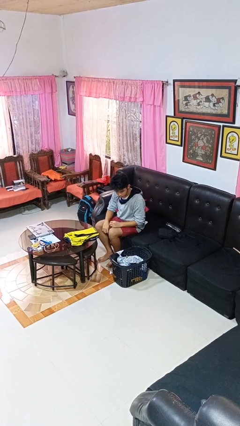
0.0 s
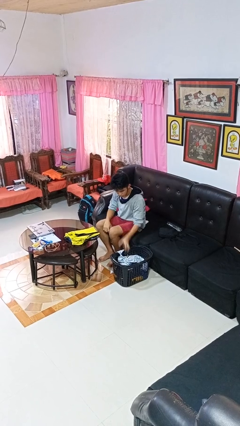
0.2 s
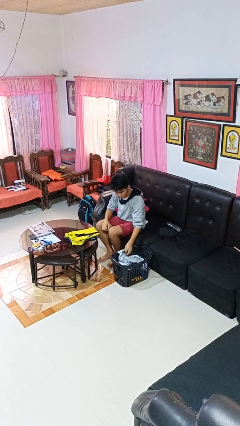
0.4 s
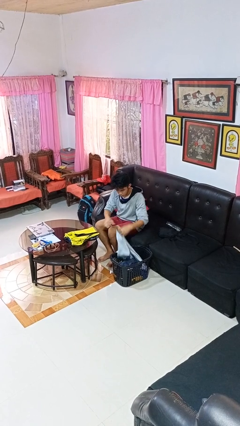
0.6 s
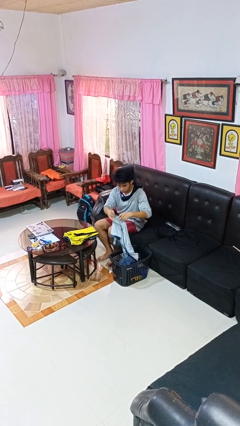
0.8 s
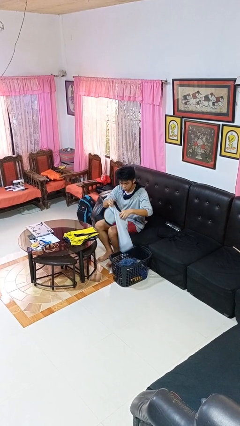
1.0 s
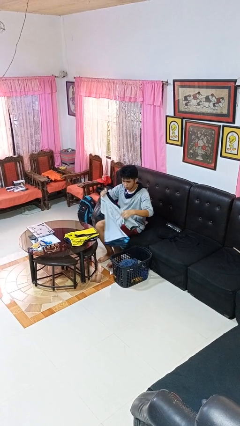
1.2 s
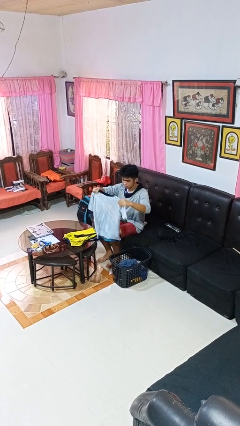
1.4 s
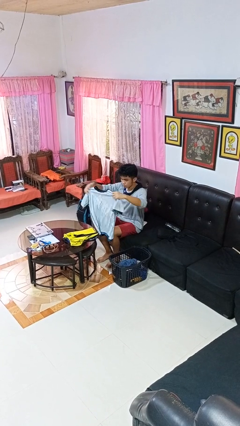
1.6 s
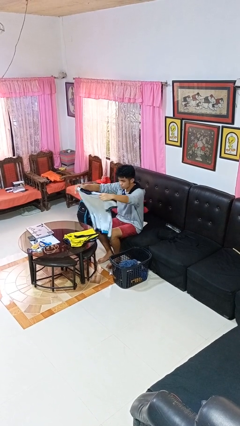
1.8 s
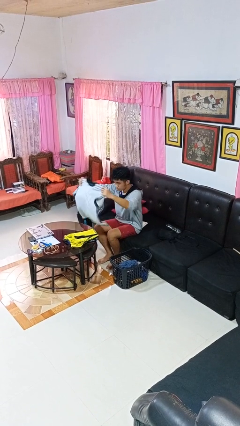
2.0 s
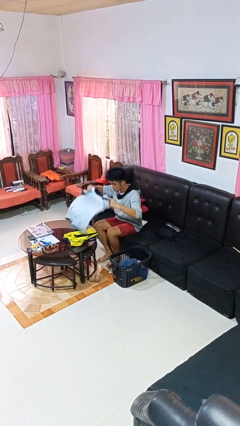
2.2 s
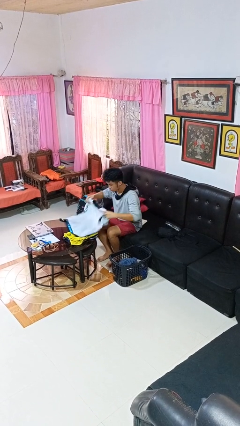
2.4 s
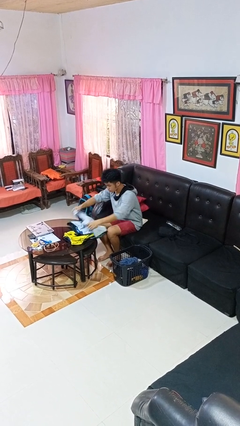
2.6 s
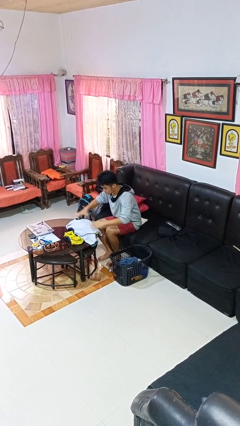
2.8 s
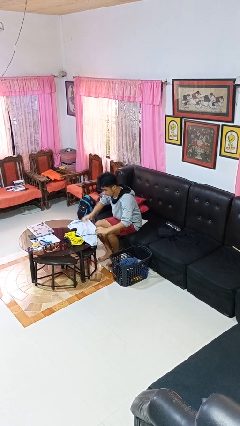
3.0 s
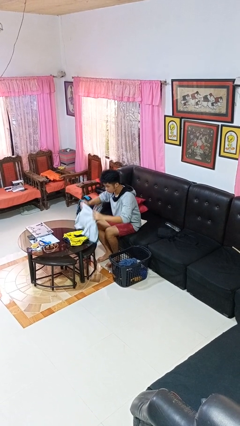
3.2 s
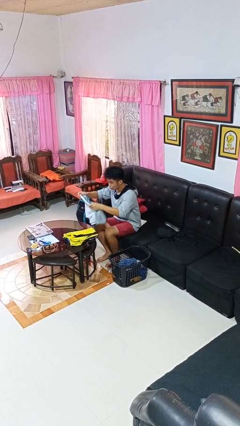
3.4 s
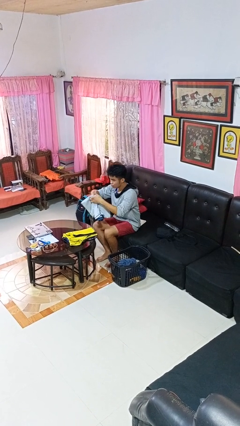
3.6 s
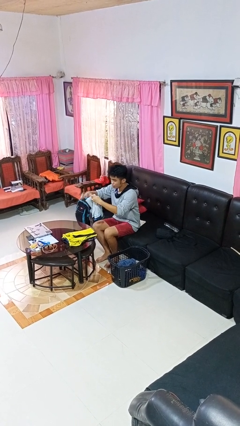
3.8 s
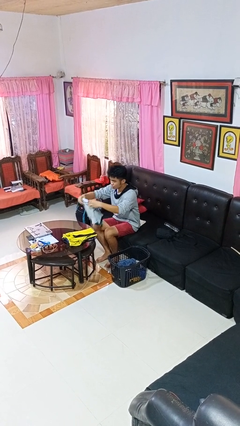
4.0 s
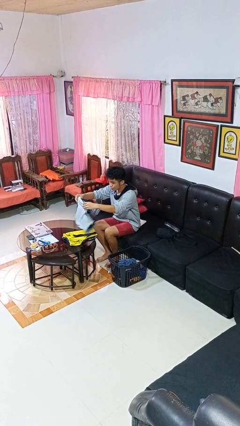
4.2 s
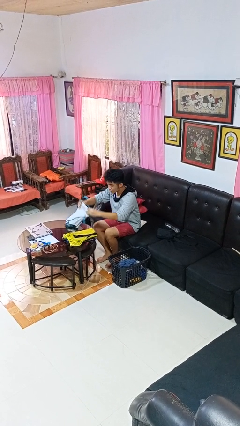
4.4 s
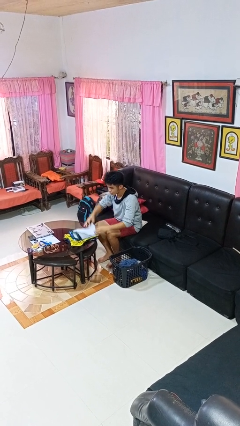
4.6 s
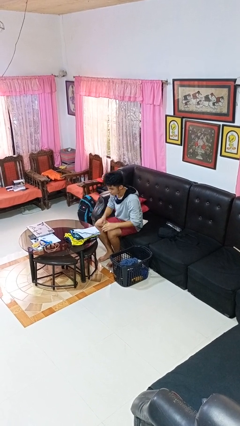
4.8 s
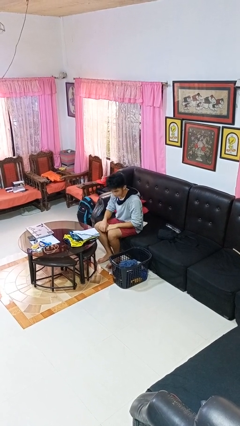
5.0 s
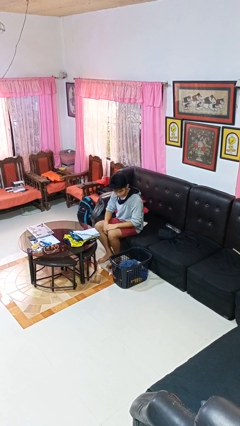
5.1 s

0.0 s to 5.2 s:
person folds shirt

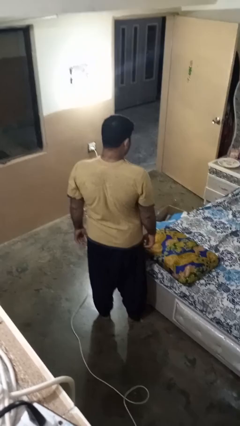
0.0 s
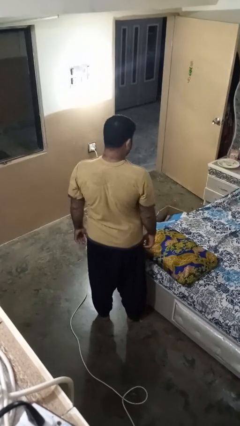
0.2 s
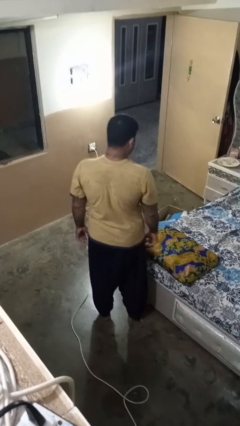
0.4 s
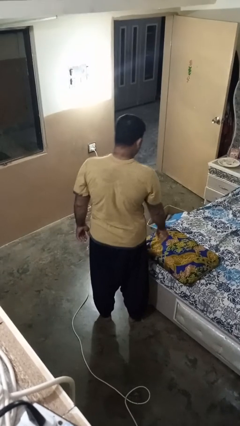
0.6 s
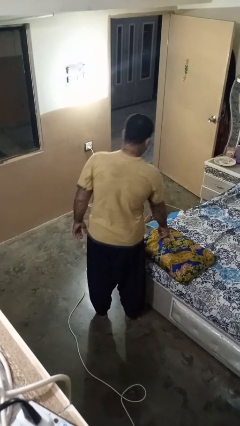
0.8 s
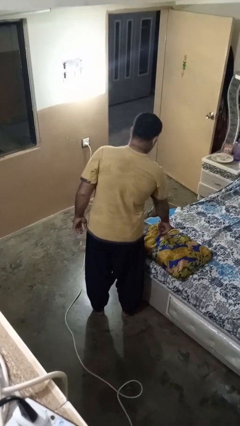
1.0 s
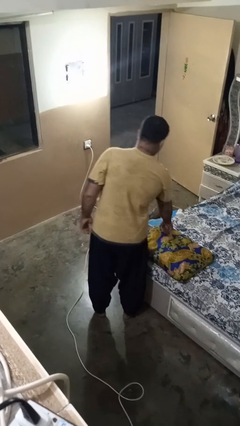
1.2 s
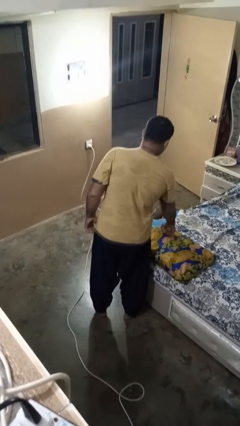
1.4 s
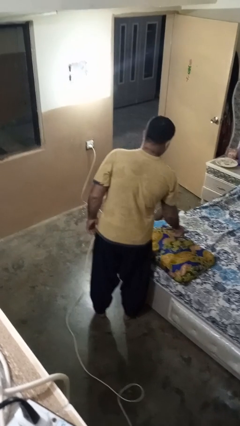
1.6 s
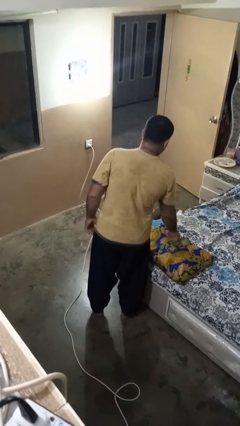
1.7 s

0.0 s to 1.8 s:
person taps object with finger

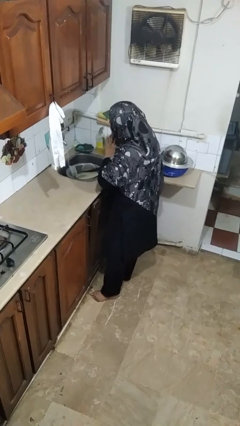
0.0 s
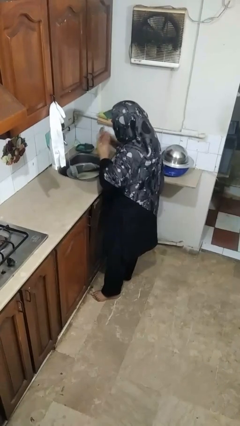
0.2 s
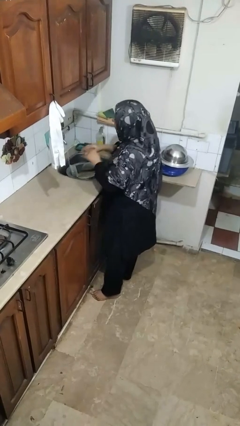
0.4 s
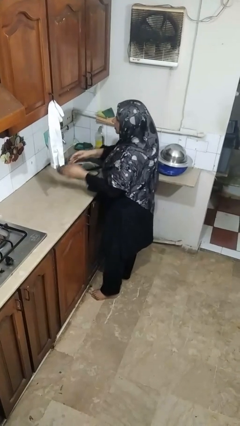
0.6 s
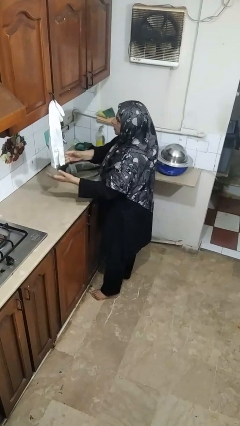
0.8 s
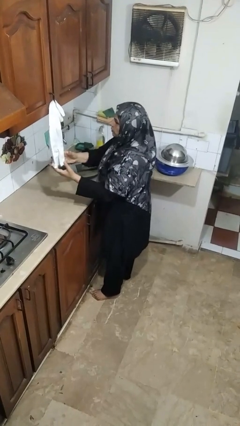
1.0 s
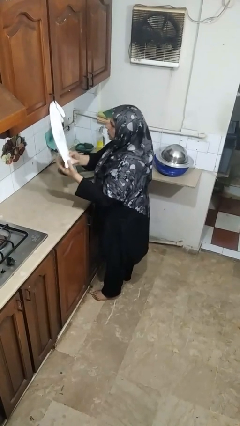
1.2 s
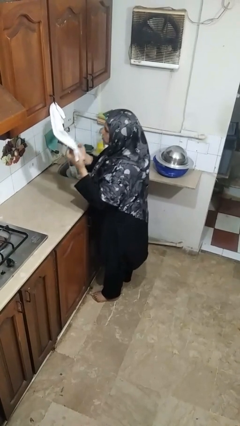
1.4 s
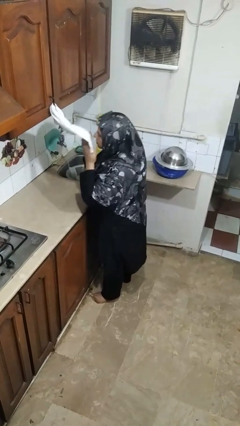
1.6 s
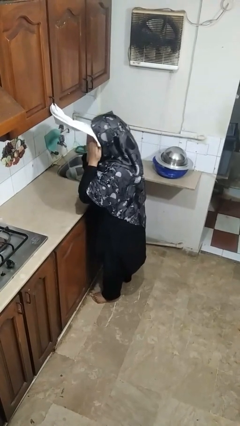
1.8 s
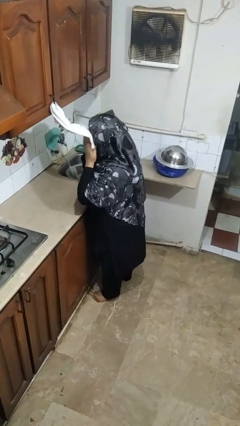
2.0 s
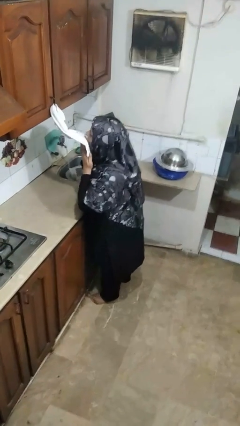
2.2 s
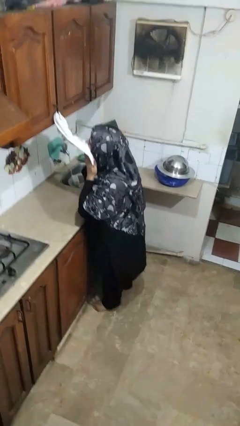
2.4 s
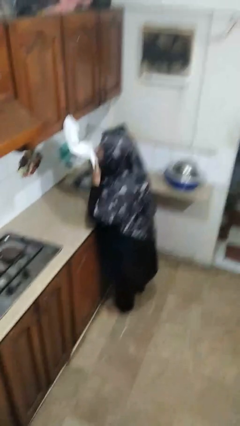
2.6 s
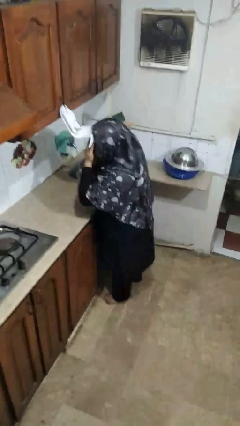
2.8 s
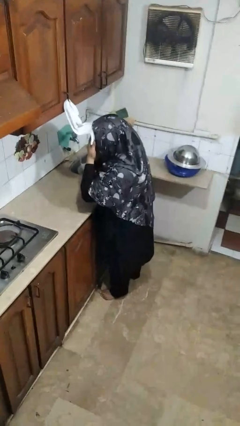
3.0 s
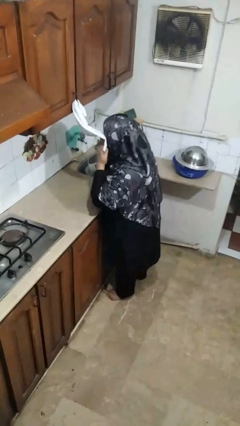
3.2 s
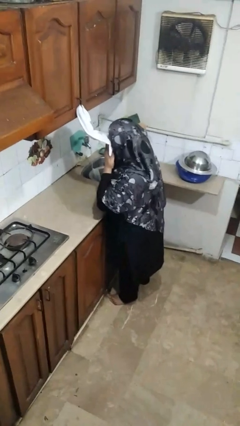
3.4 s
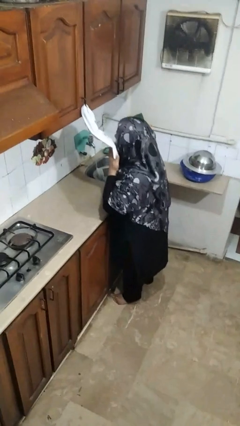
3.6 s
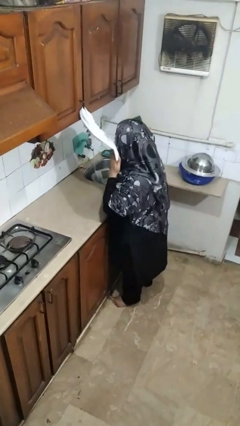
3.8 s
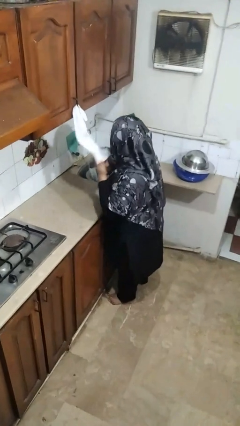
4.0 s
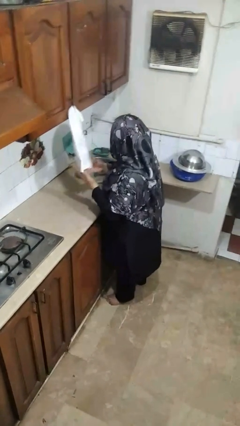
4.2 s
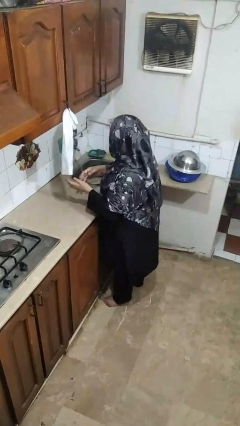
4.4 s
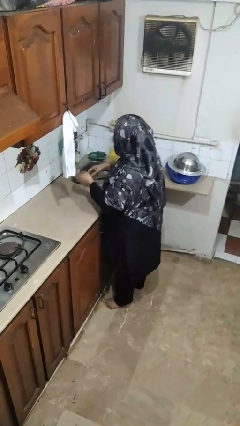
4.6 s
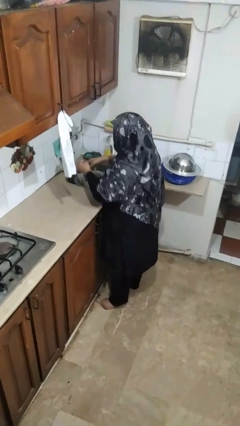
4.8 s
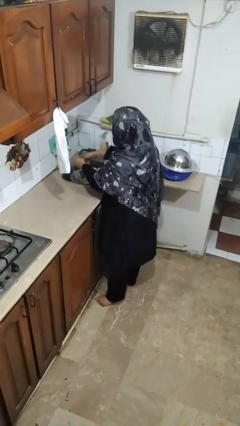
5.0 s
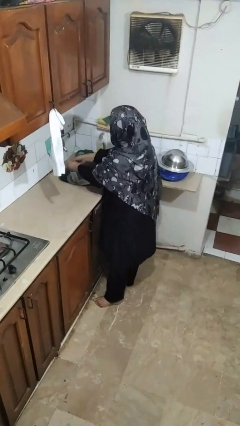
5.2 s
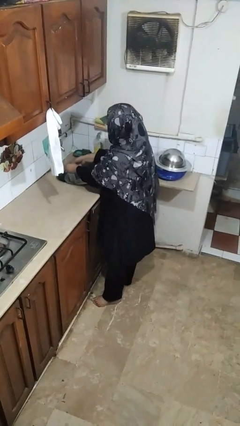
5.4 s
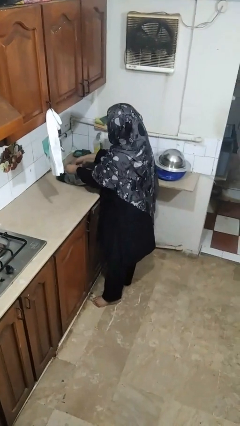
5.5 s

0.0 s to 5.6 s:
person dries face with towel

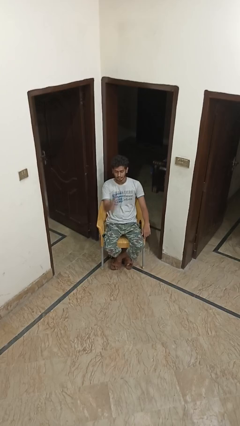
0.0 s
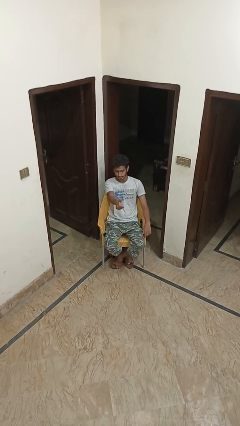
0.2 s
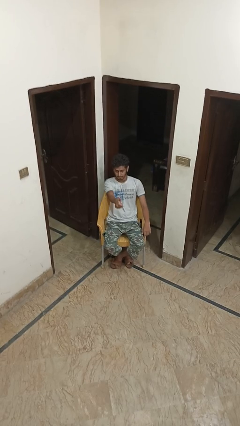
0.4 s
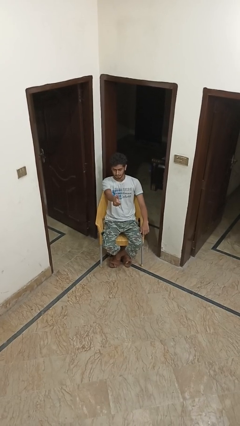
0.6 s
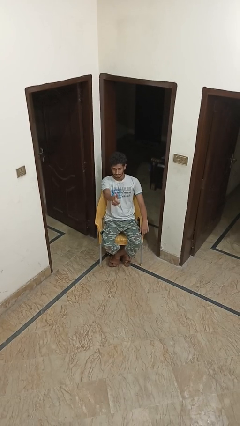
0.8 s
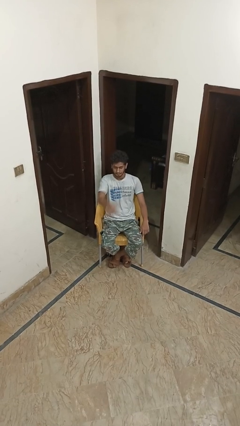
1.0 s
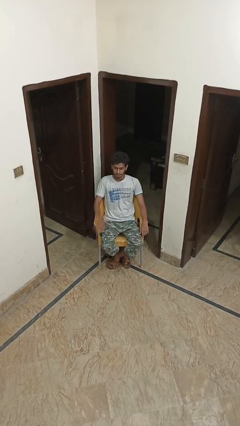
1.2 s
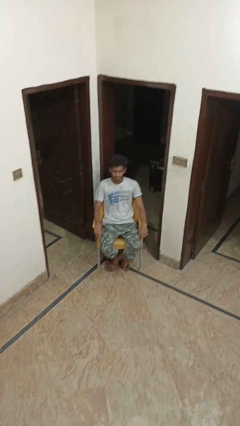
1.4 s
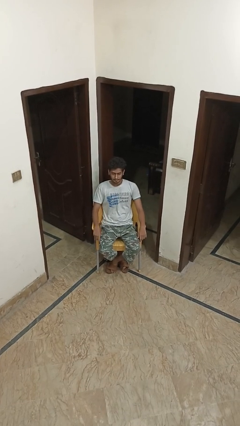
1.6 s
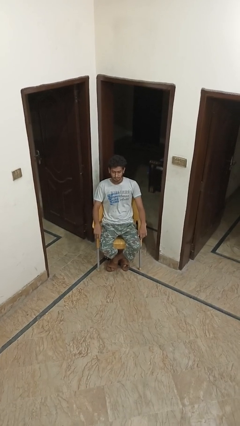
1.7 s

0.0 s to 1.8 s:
person gestures thumbs up

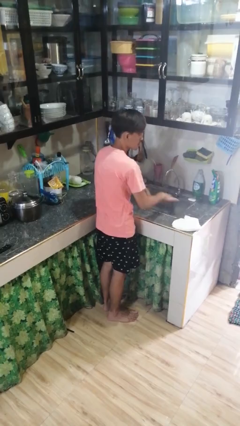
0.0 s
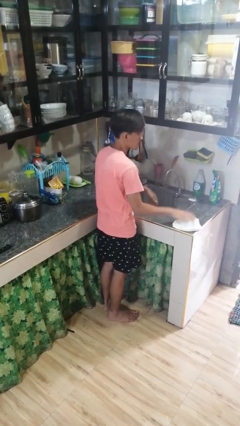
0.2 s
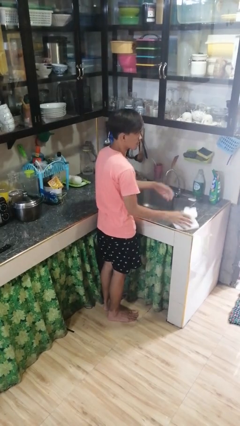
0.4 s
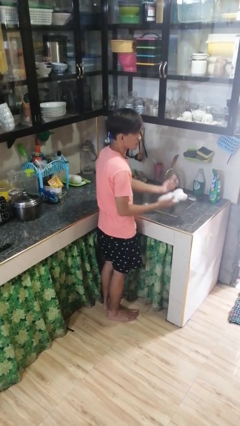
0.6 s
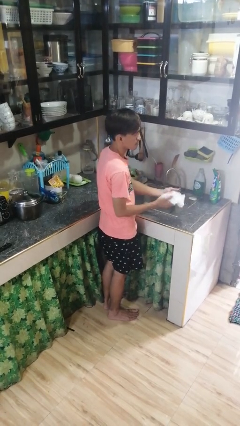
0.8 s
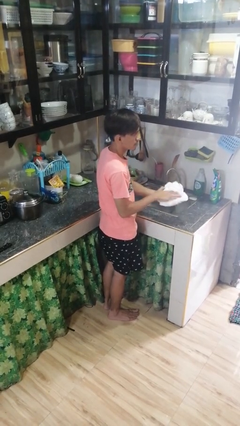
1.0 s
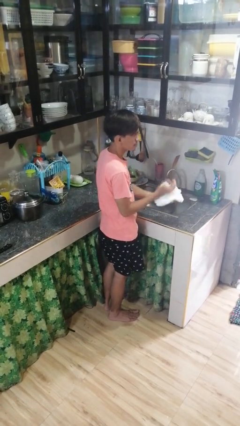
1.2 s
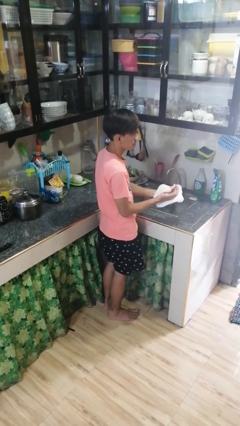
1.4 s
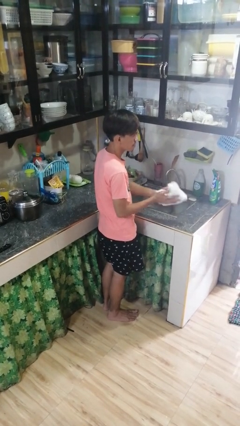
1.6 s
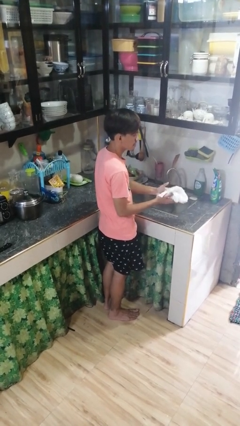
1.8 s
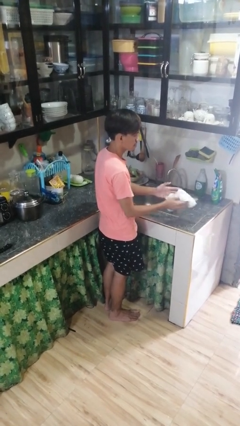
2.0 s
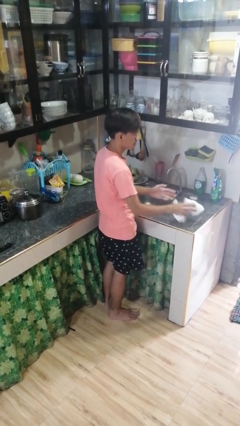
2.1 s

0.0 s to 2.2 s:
person dries hands with towel

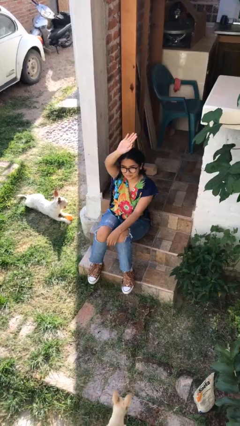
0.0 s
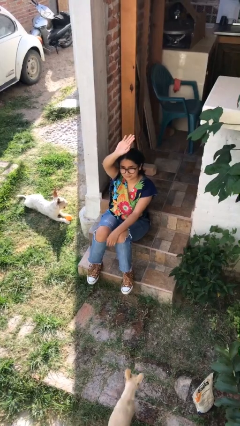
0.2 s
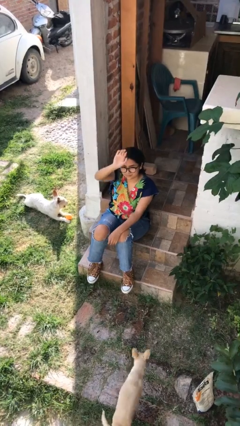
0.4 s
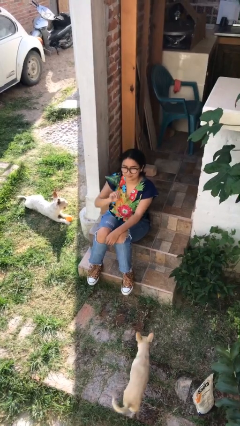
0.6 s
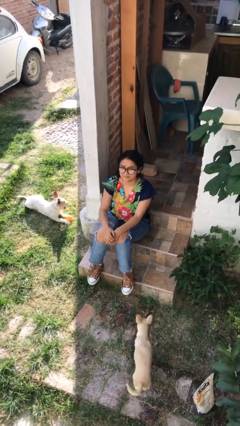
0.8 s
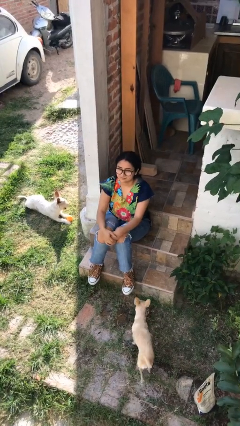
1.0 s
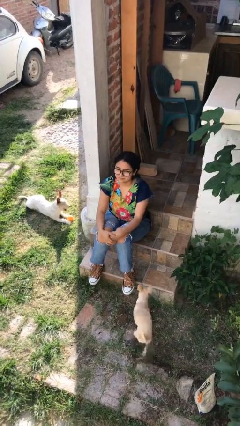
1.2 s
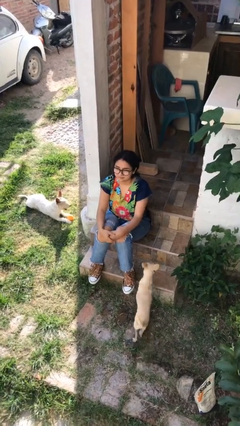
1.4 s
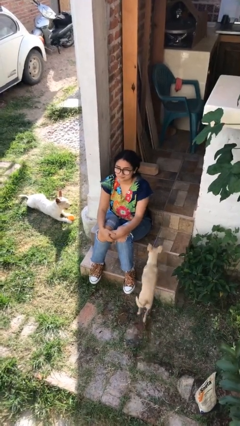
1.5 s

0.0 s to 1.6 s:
person gestures lower hand
